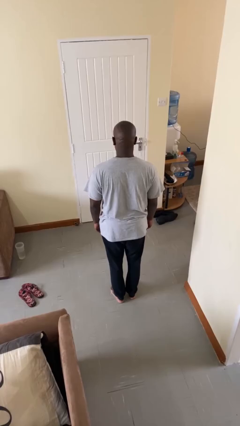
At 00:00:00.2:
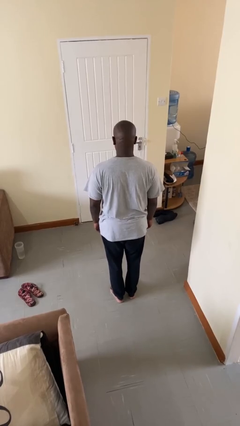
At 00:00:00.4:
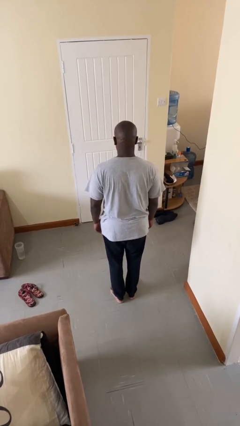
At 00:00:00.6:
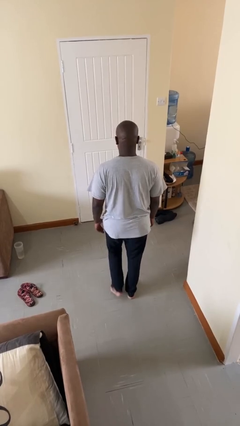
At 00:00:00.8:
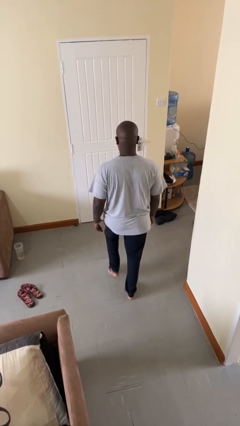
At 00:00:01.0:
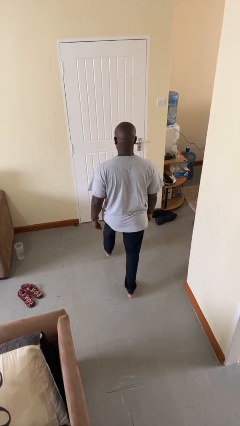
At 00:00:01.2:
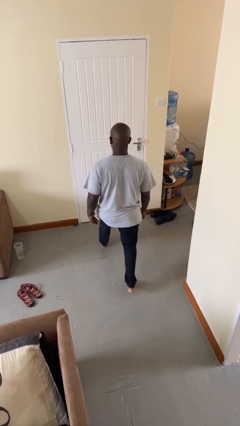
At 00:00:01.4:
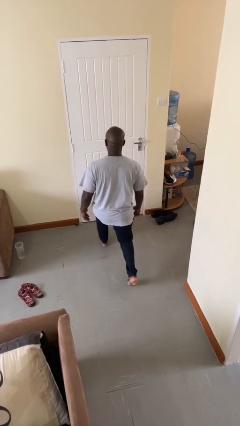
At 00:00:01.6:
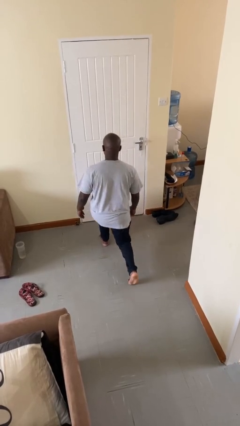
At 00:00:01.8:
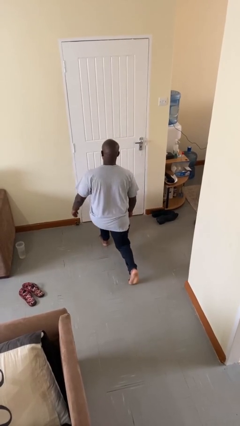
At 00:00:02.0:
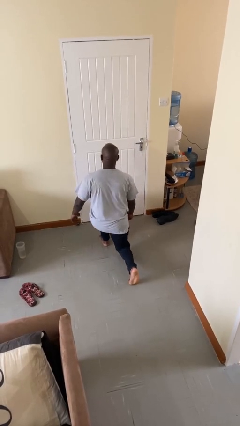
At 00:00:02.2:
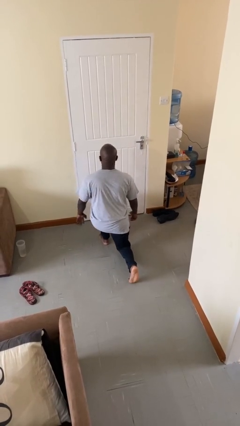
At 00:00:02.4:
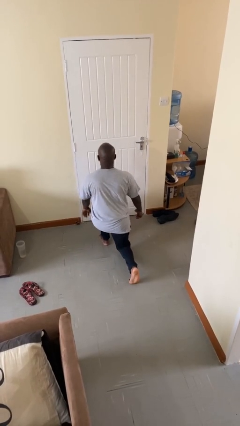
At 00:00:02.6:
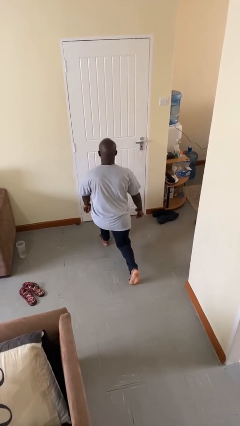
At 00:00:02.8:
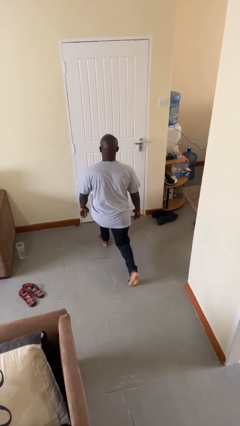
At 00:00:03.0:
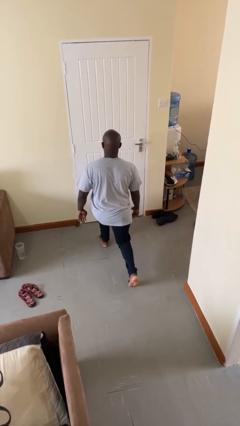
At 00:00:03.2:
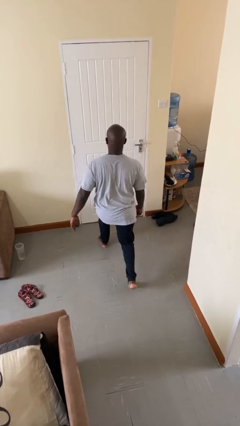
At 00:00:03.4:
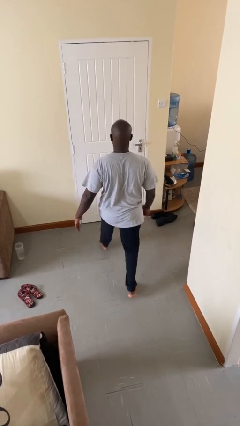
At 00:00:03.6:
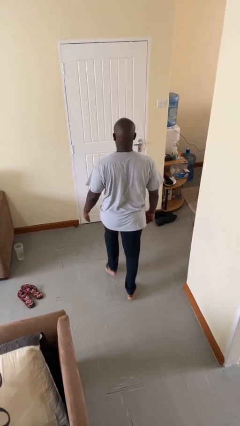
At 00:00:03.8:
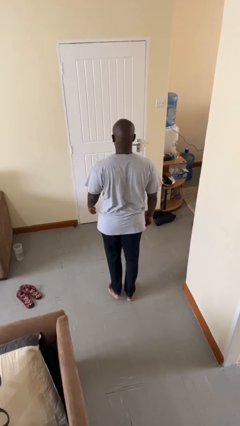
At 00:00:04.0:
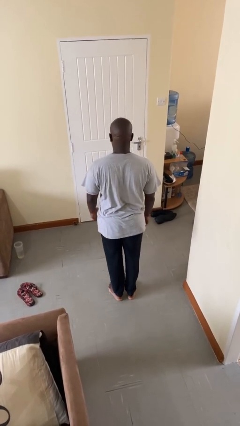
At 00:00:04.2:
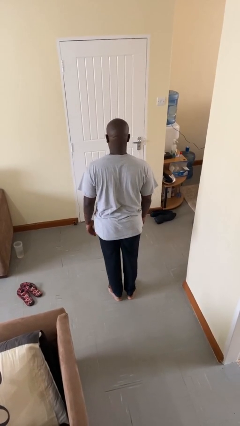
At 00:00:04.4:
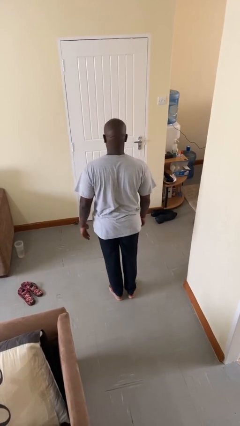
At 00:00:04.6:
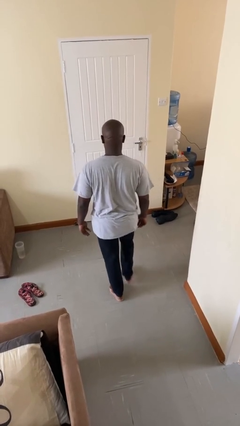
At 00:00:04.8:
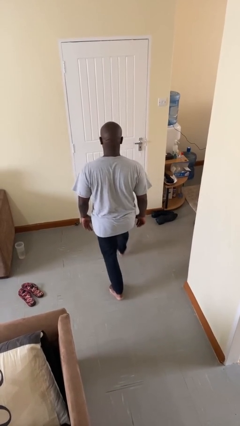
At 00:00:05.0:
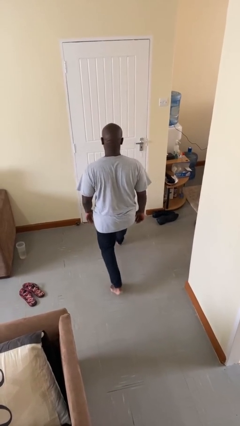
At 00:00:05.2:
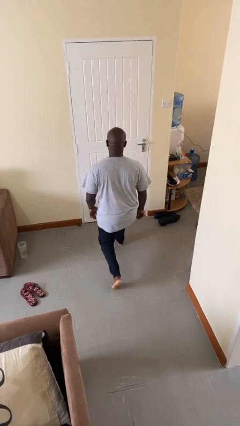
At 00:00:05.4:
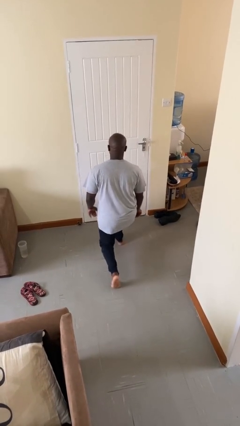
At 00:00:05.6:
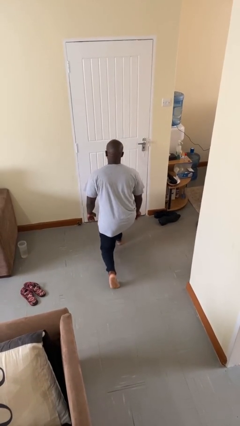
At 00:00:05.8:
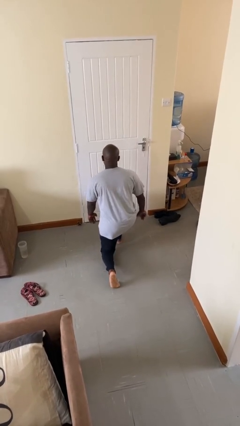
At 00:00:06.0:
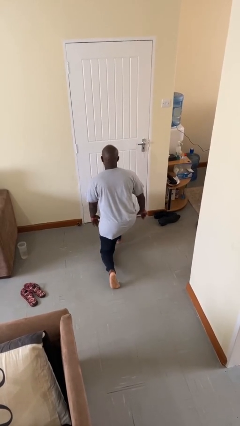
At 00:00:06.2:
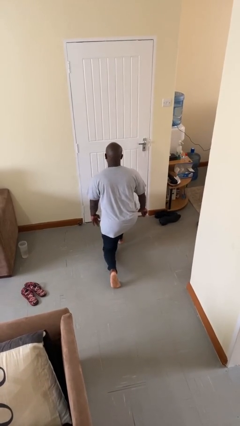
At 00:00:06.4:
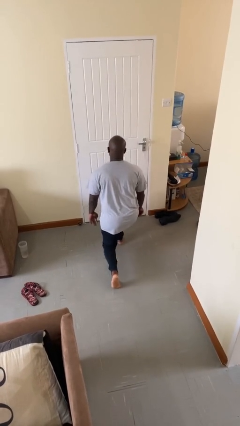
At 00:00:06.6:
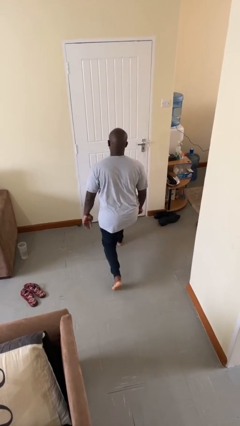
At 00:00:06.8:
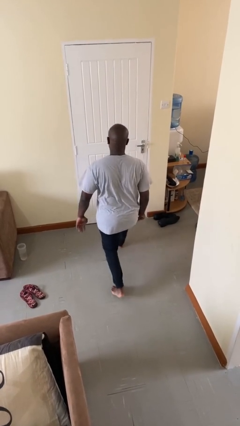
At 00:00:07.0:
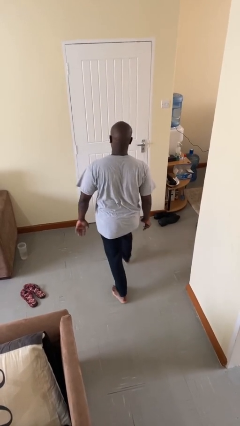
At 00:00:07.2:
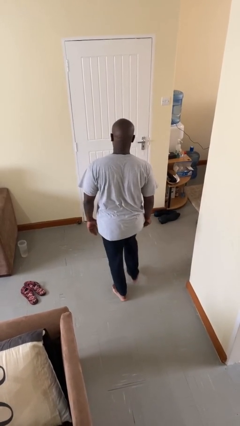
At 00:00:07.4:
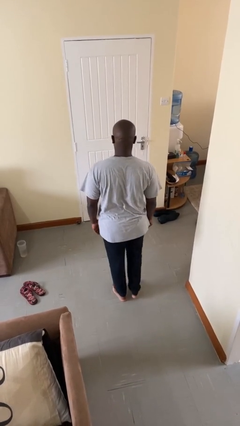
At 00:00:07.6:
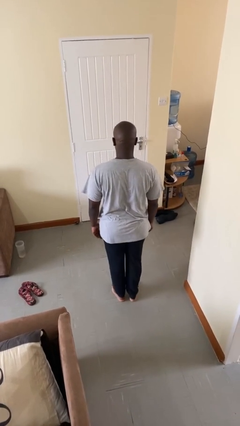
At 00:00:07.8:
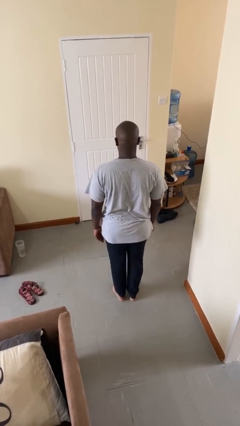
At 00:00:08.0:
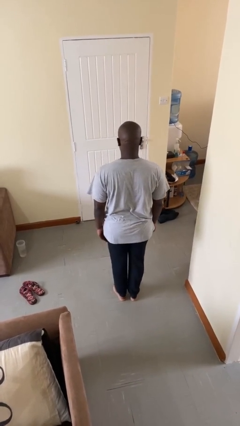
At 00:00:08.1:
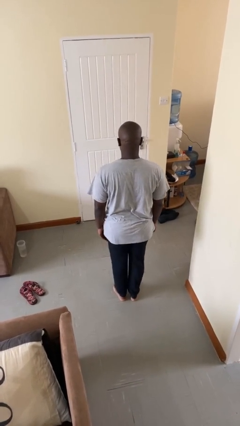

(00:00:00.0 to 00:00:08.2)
person exercises with lunges

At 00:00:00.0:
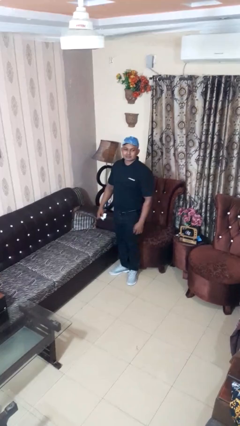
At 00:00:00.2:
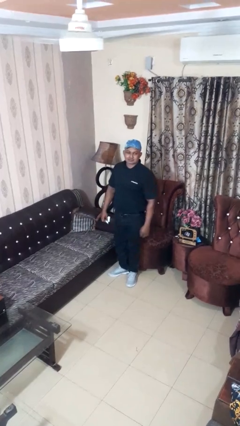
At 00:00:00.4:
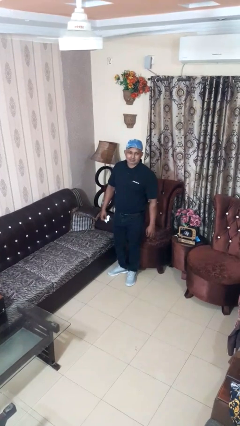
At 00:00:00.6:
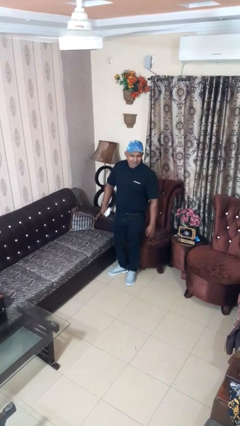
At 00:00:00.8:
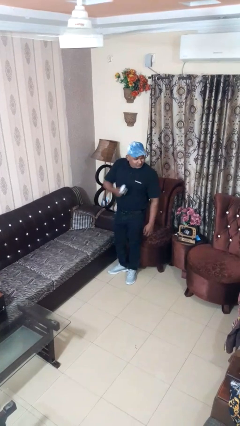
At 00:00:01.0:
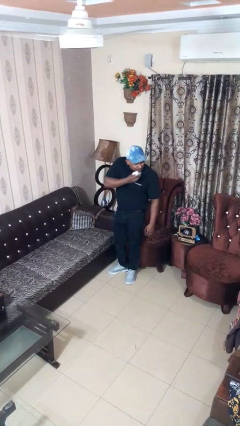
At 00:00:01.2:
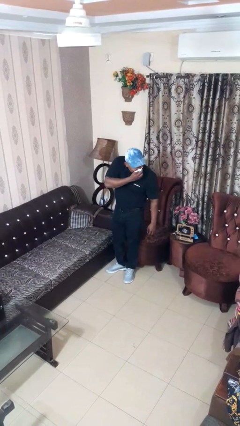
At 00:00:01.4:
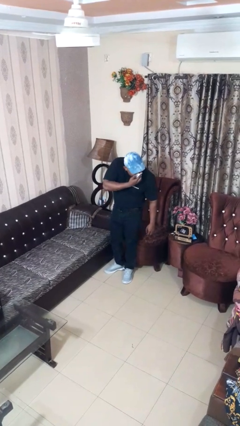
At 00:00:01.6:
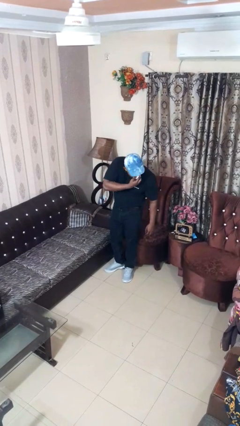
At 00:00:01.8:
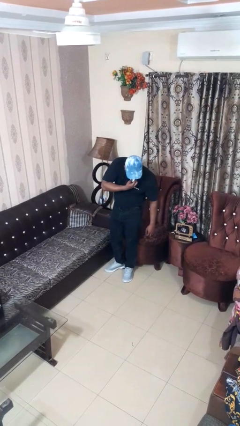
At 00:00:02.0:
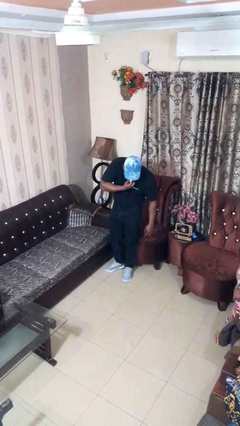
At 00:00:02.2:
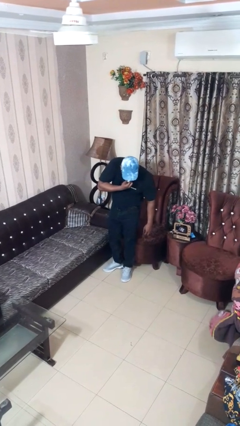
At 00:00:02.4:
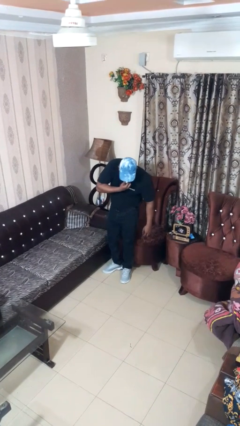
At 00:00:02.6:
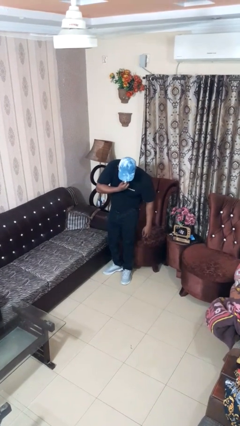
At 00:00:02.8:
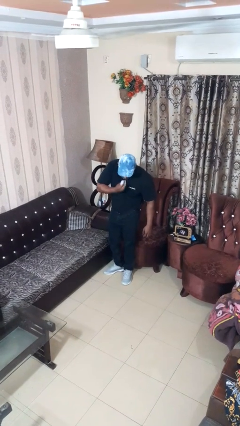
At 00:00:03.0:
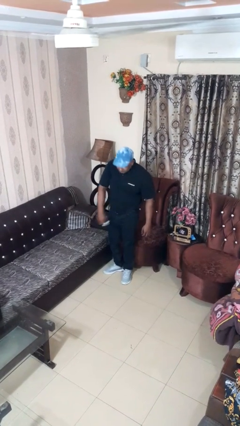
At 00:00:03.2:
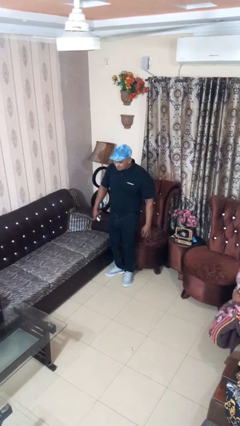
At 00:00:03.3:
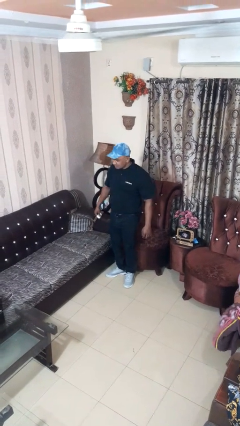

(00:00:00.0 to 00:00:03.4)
person blows nose

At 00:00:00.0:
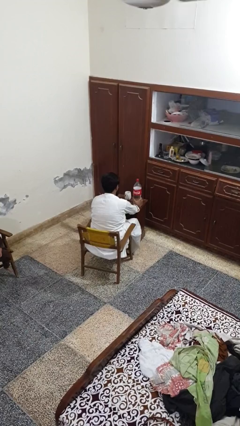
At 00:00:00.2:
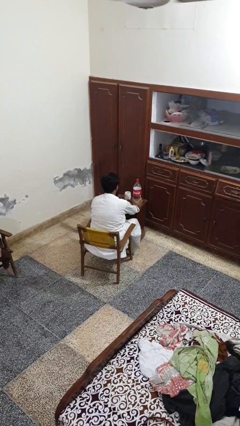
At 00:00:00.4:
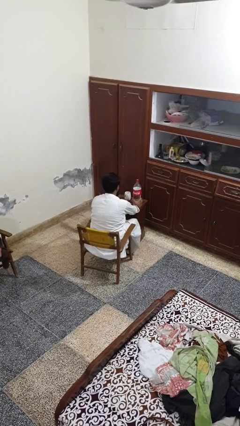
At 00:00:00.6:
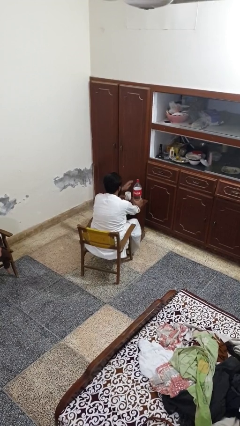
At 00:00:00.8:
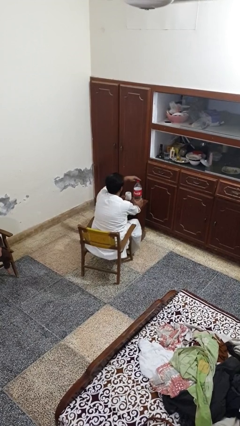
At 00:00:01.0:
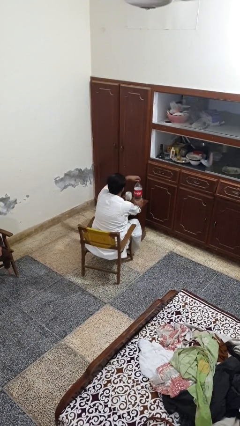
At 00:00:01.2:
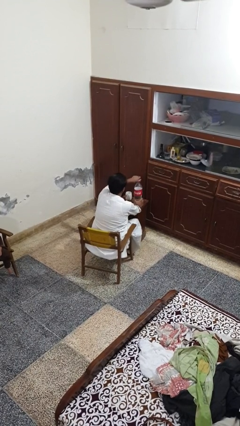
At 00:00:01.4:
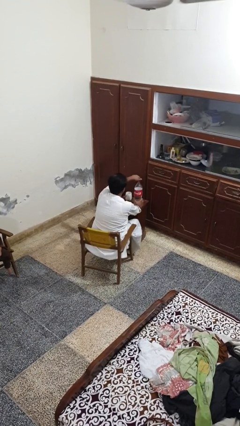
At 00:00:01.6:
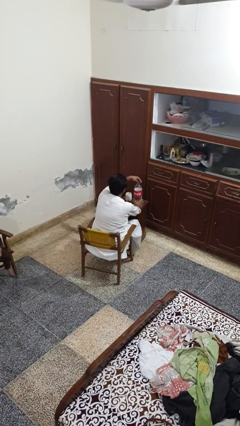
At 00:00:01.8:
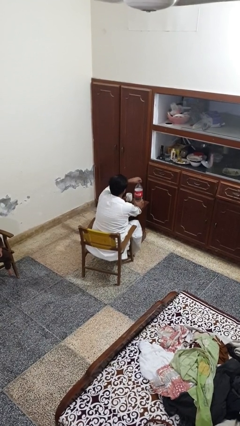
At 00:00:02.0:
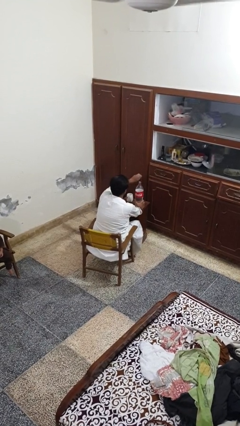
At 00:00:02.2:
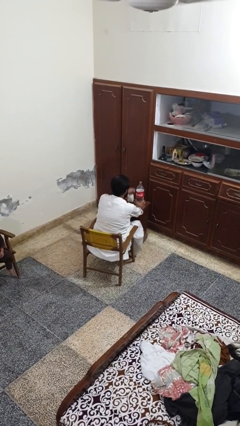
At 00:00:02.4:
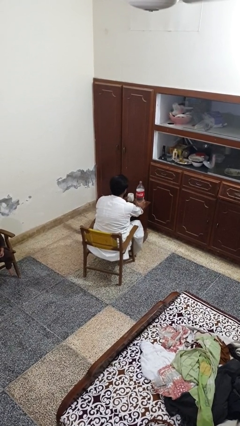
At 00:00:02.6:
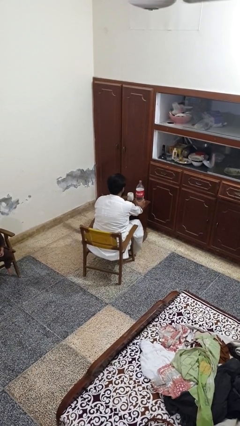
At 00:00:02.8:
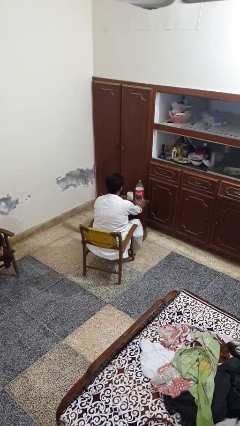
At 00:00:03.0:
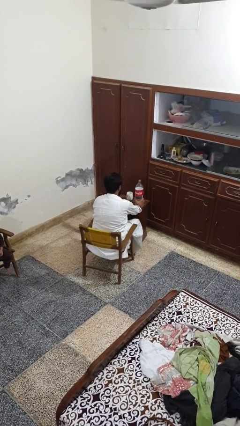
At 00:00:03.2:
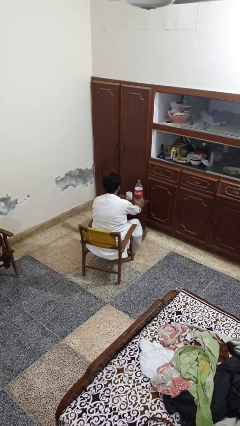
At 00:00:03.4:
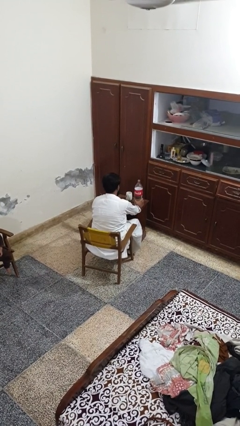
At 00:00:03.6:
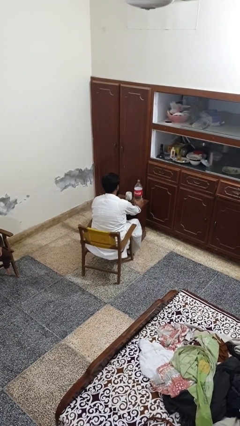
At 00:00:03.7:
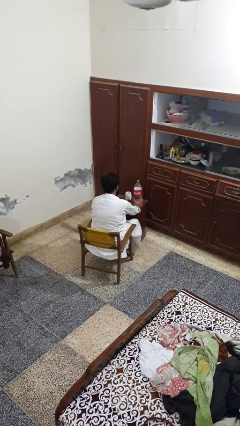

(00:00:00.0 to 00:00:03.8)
person unscrews lid from bottle

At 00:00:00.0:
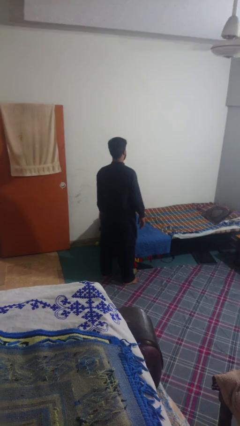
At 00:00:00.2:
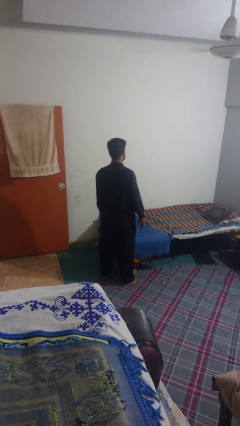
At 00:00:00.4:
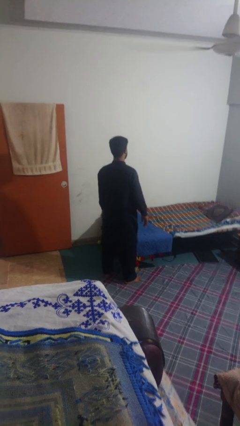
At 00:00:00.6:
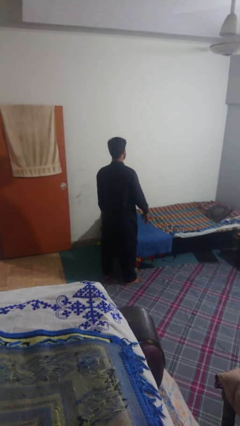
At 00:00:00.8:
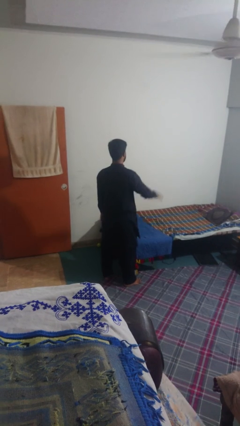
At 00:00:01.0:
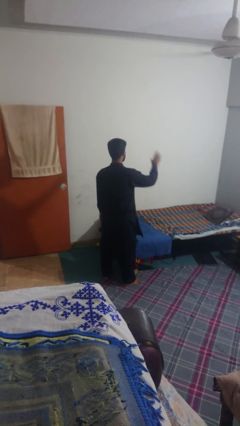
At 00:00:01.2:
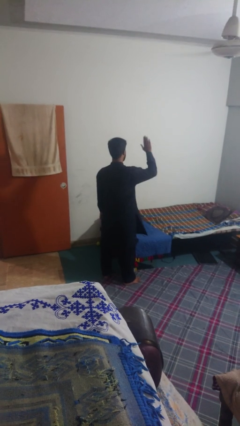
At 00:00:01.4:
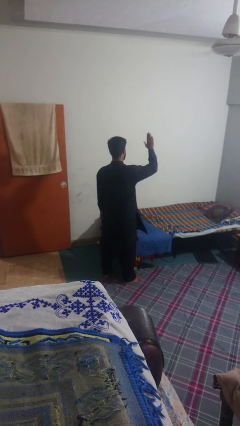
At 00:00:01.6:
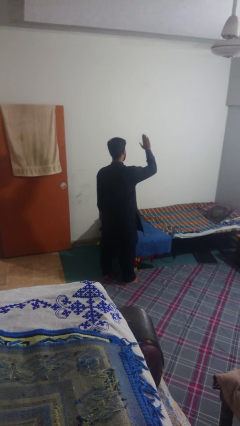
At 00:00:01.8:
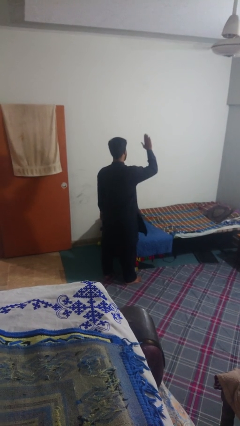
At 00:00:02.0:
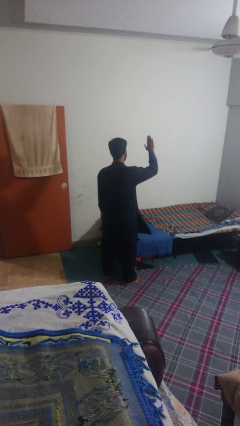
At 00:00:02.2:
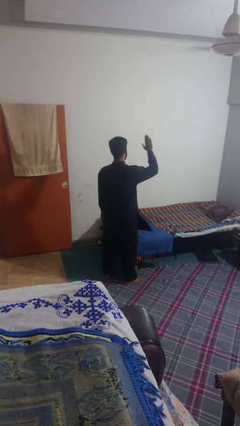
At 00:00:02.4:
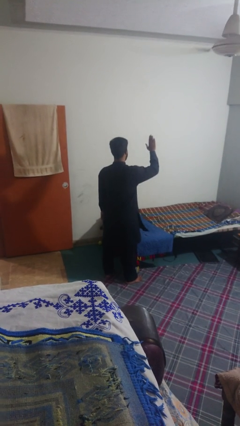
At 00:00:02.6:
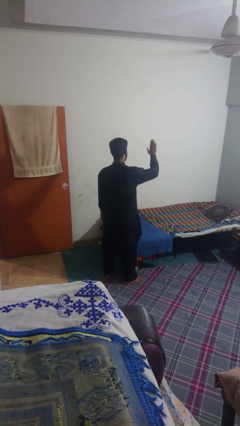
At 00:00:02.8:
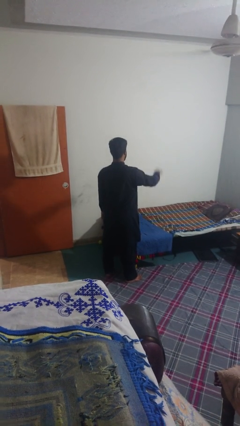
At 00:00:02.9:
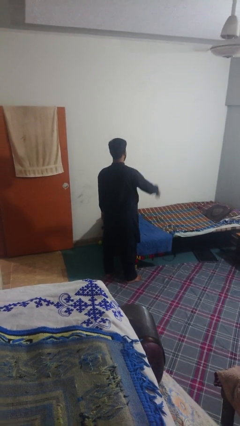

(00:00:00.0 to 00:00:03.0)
person gestures stop
